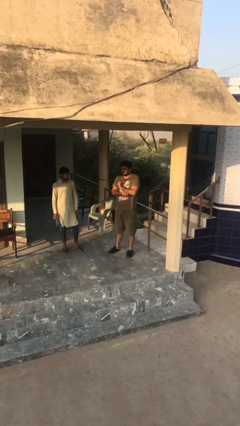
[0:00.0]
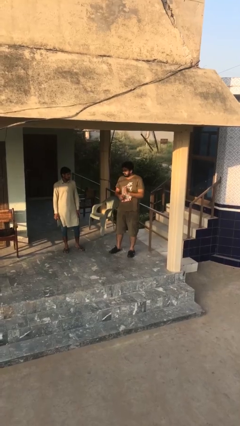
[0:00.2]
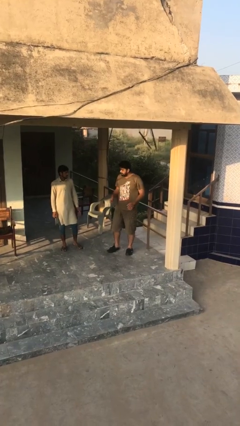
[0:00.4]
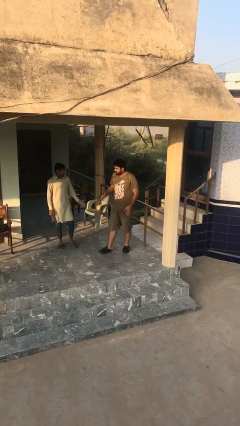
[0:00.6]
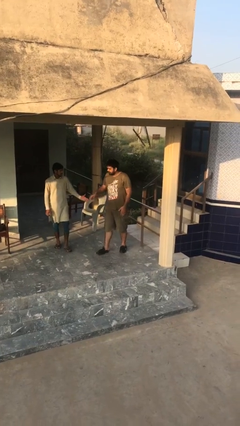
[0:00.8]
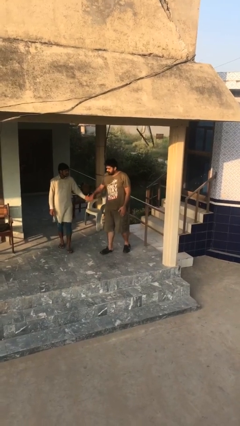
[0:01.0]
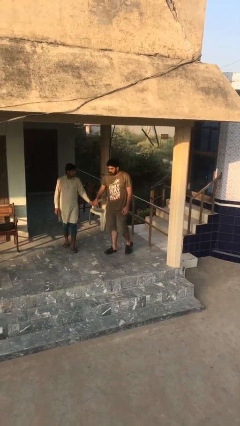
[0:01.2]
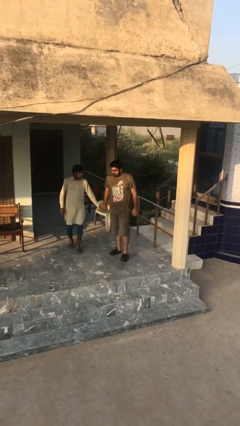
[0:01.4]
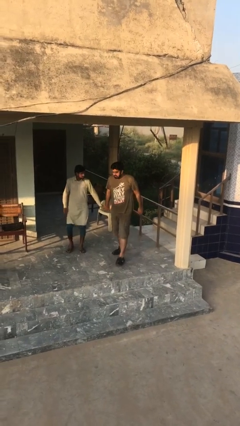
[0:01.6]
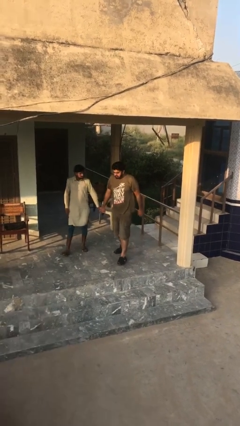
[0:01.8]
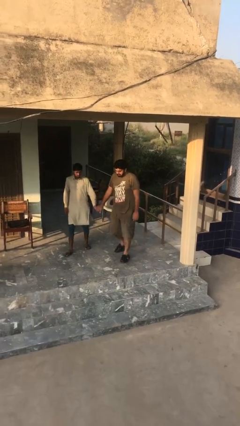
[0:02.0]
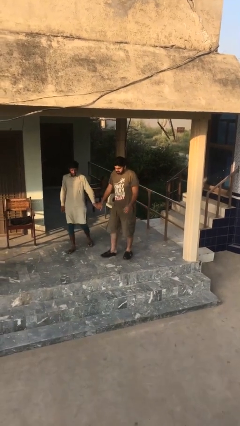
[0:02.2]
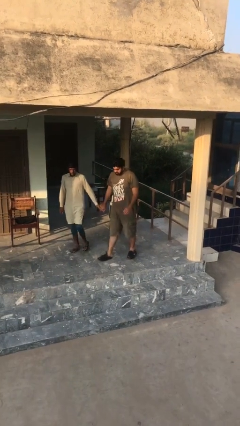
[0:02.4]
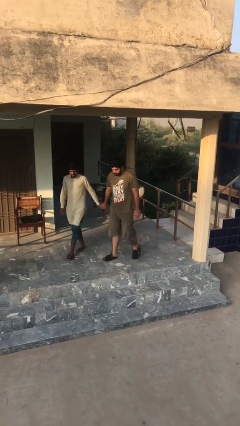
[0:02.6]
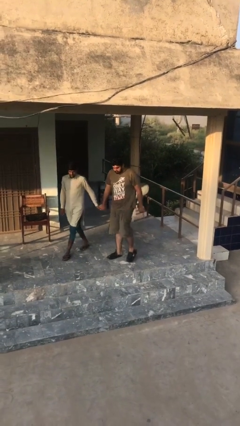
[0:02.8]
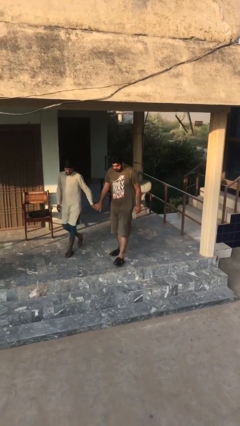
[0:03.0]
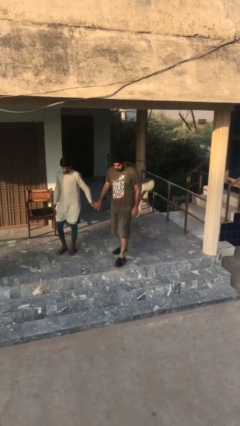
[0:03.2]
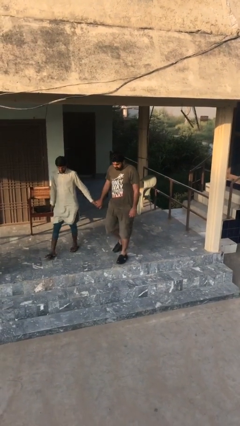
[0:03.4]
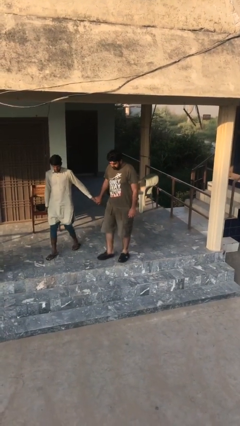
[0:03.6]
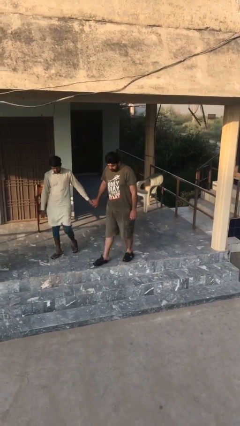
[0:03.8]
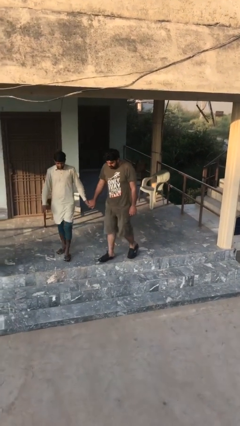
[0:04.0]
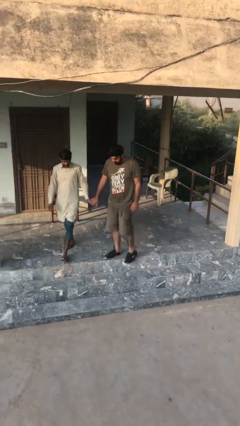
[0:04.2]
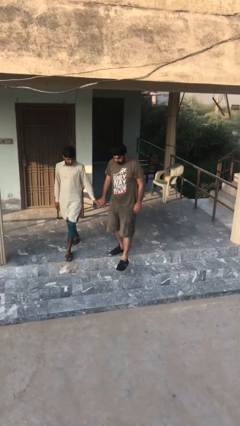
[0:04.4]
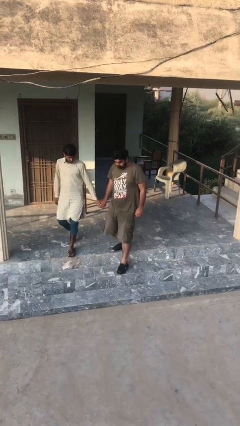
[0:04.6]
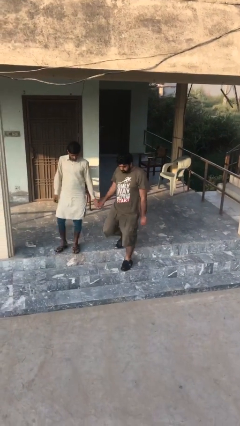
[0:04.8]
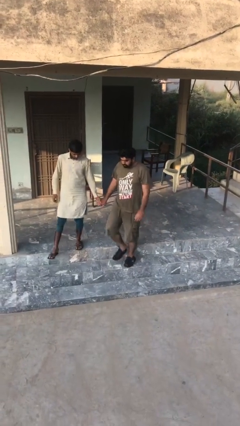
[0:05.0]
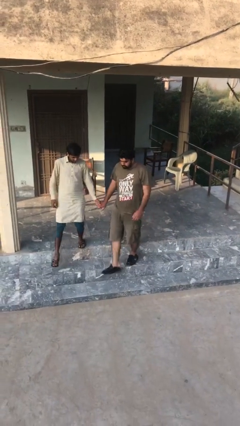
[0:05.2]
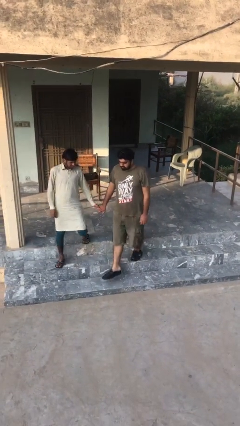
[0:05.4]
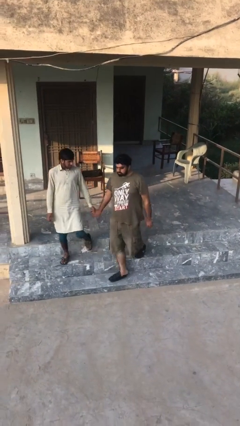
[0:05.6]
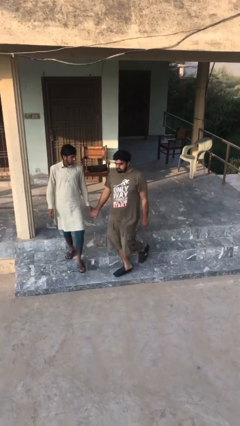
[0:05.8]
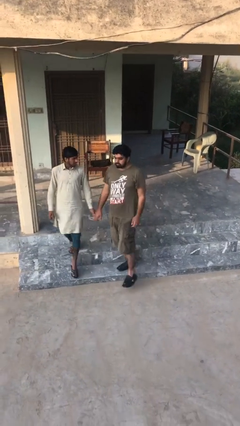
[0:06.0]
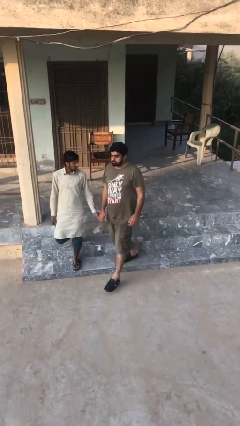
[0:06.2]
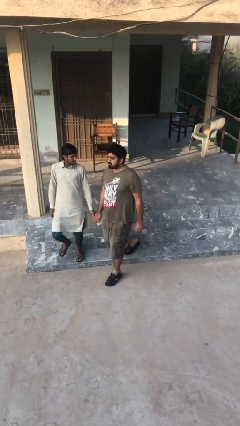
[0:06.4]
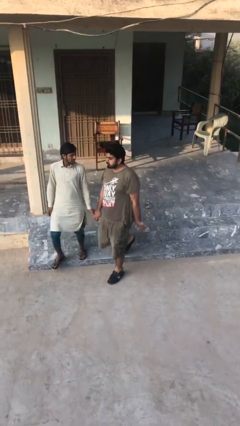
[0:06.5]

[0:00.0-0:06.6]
person holds hand

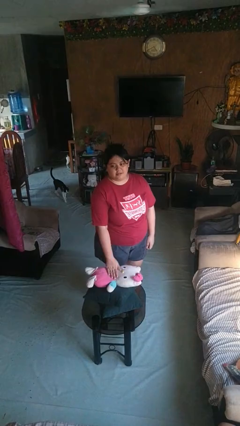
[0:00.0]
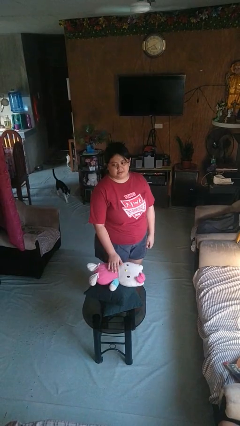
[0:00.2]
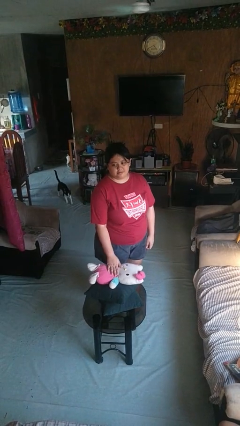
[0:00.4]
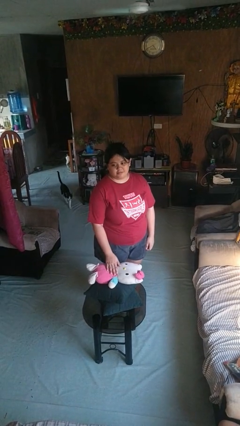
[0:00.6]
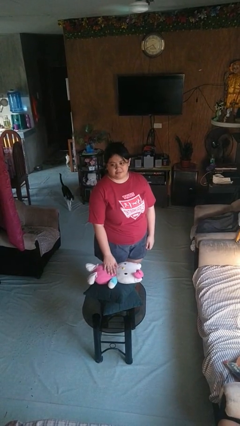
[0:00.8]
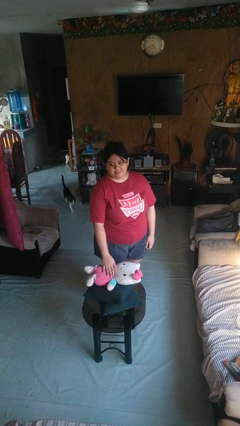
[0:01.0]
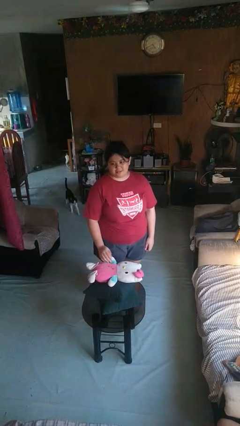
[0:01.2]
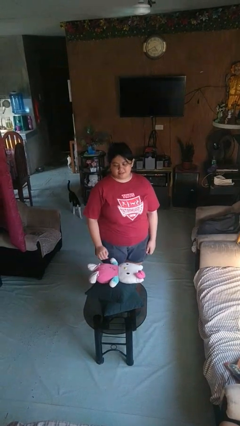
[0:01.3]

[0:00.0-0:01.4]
person taps object with finger

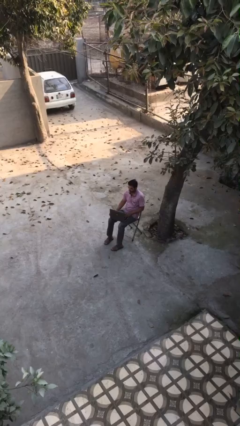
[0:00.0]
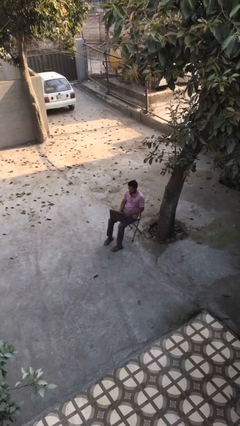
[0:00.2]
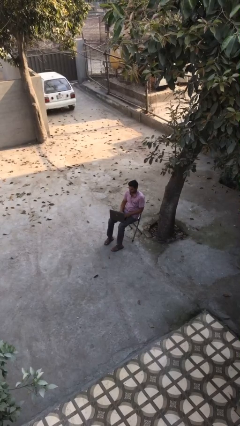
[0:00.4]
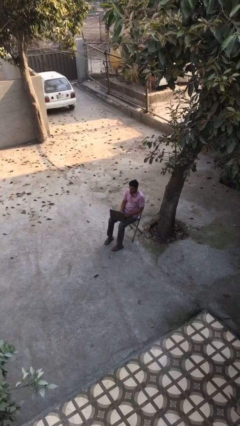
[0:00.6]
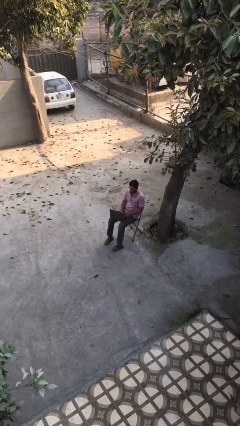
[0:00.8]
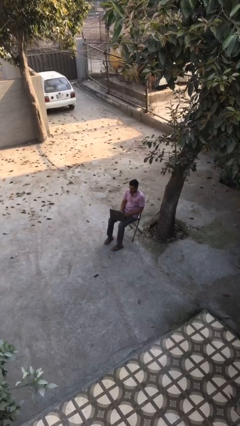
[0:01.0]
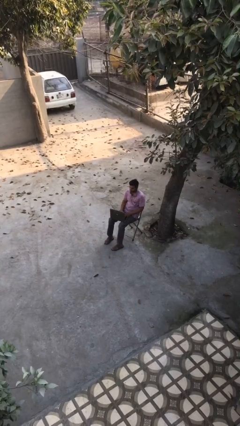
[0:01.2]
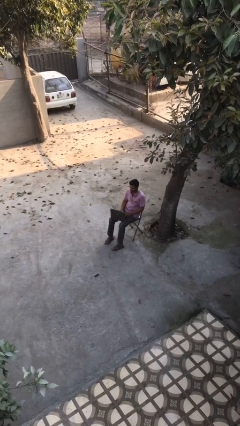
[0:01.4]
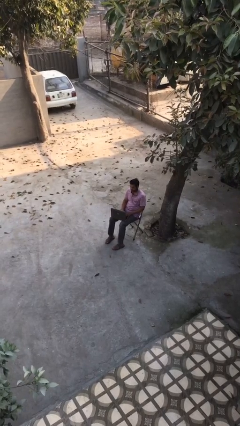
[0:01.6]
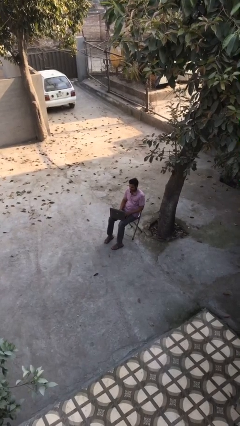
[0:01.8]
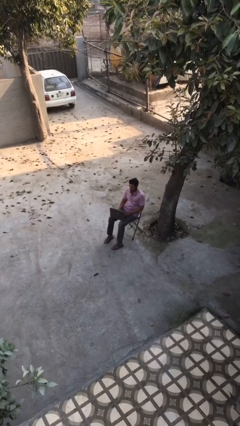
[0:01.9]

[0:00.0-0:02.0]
person interacts with laptop

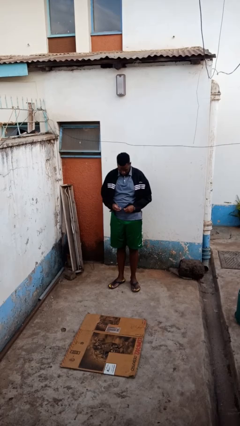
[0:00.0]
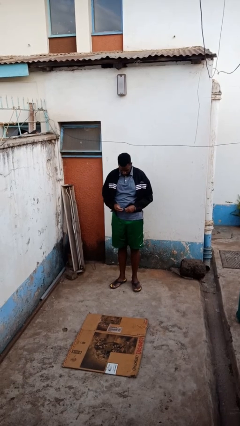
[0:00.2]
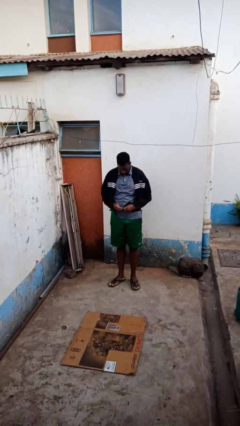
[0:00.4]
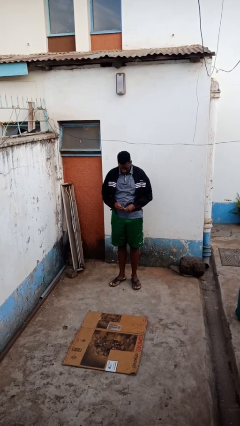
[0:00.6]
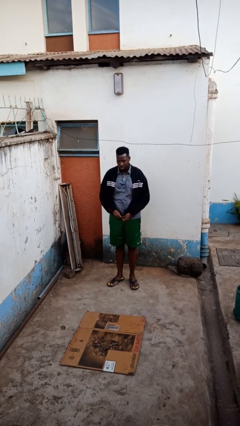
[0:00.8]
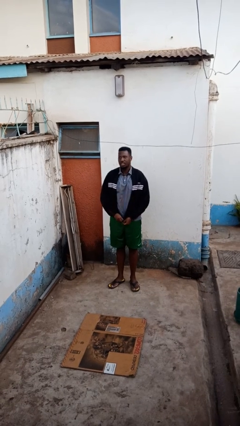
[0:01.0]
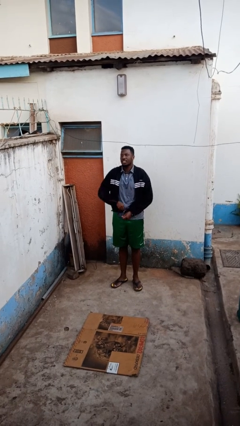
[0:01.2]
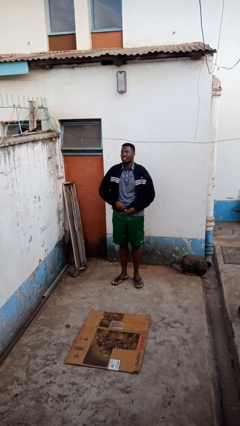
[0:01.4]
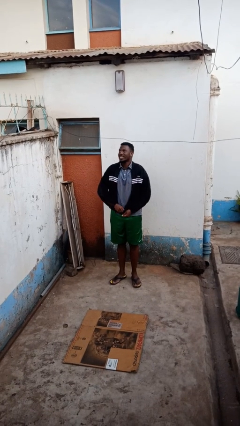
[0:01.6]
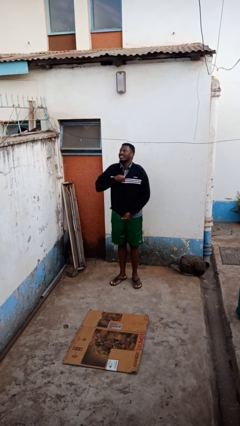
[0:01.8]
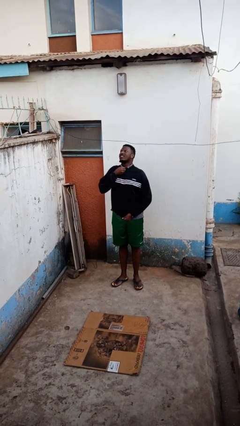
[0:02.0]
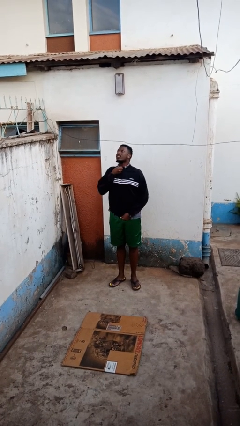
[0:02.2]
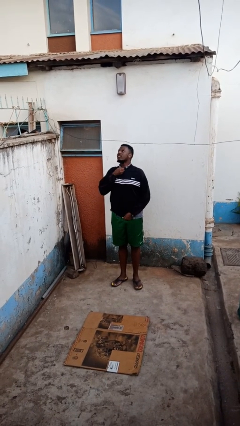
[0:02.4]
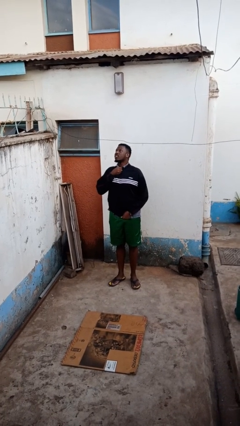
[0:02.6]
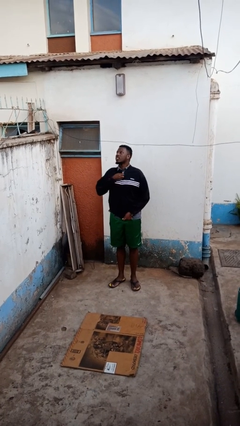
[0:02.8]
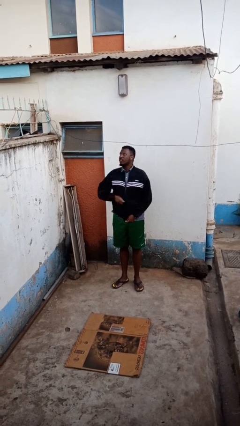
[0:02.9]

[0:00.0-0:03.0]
person zips up jacket

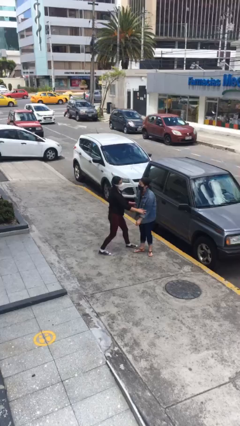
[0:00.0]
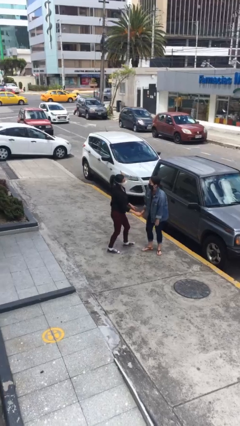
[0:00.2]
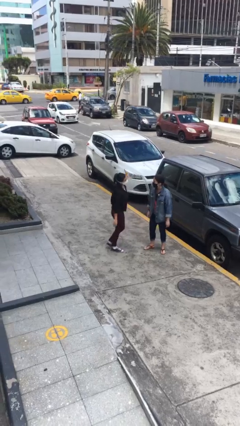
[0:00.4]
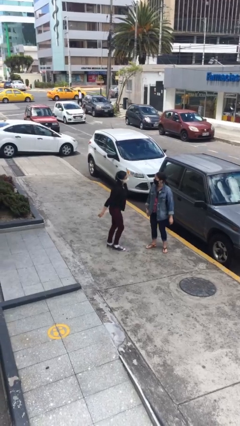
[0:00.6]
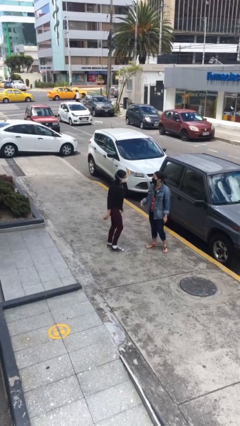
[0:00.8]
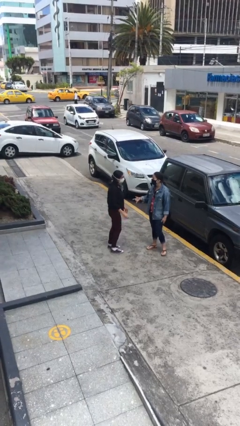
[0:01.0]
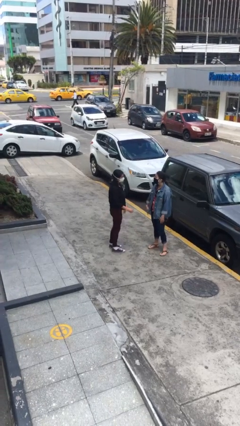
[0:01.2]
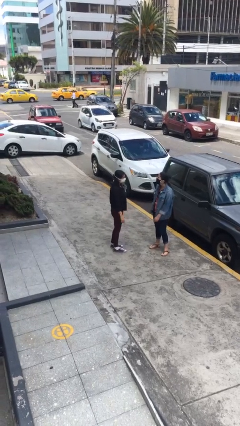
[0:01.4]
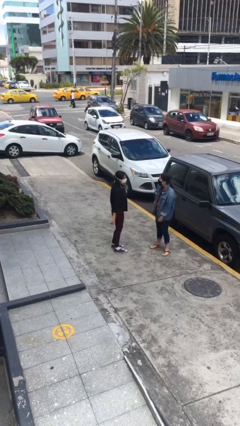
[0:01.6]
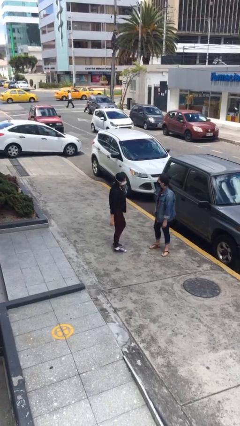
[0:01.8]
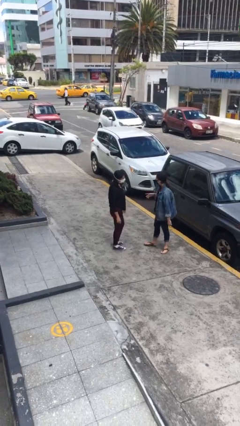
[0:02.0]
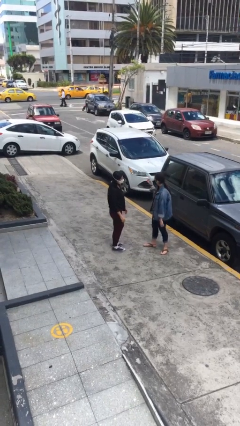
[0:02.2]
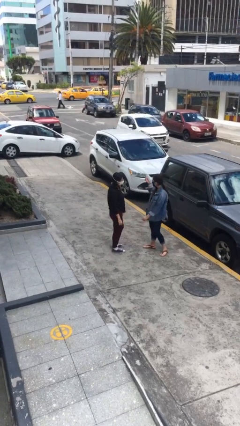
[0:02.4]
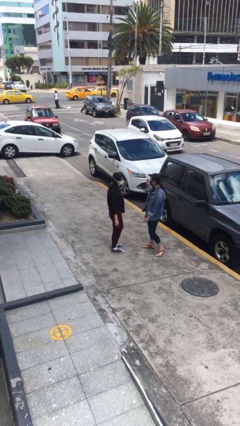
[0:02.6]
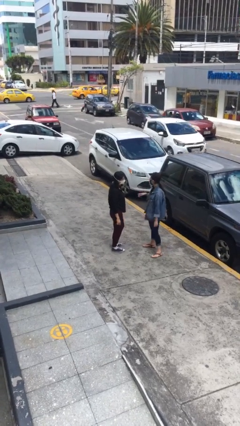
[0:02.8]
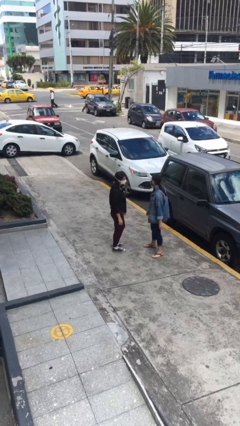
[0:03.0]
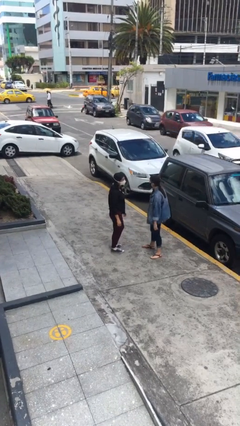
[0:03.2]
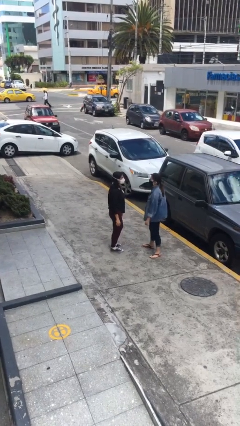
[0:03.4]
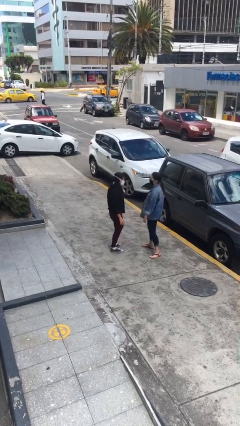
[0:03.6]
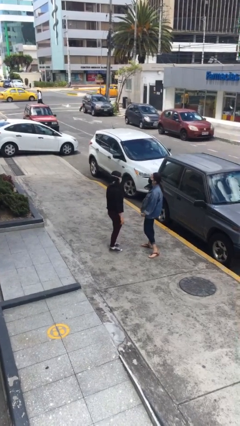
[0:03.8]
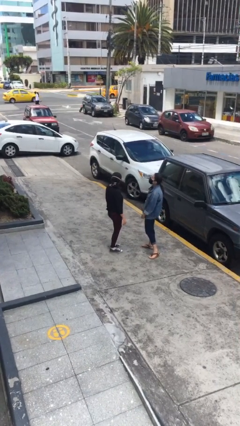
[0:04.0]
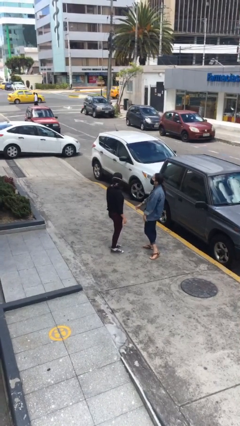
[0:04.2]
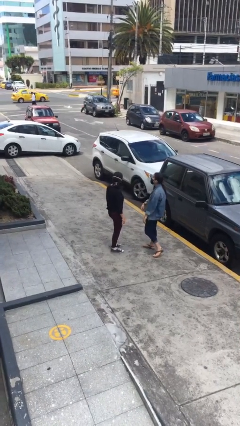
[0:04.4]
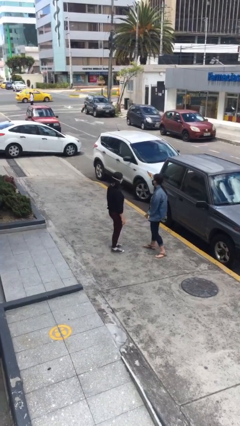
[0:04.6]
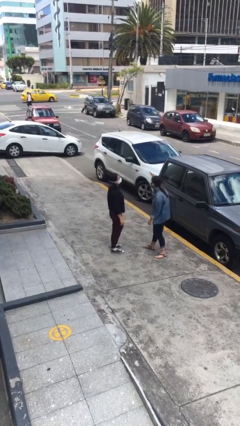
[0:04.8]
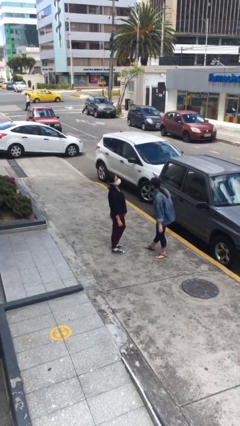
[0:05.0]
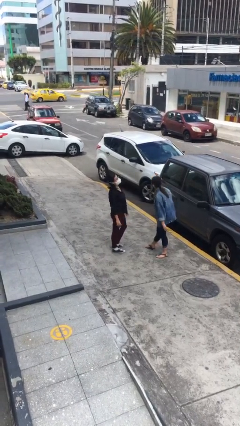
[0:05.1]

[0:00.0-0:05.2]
person talks to person
